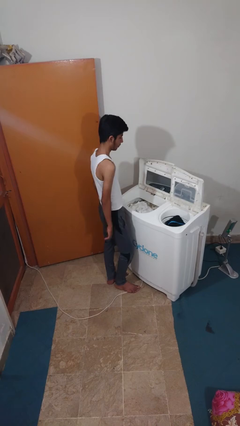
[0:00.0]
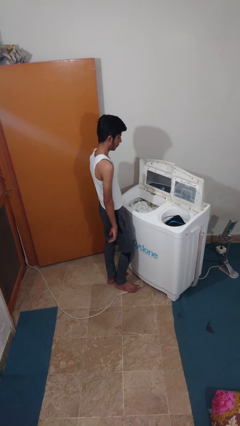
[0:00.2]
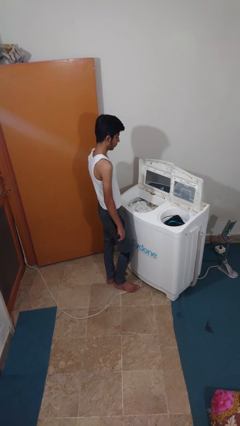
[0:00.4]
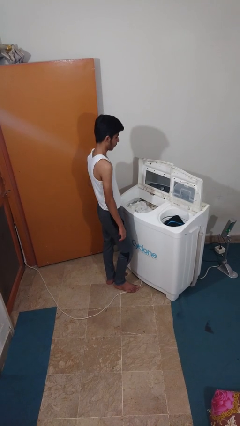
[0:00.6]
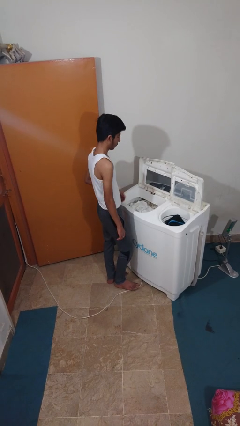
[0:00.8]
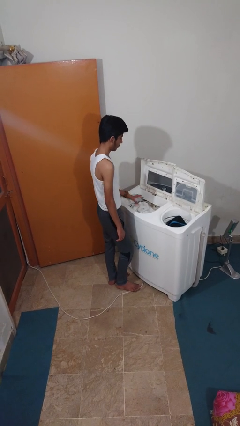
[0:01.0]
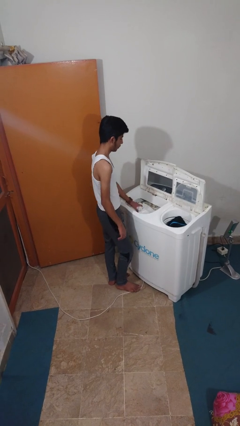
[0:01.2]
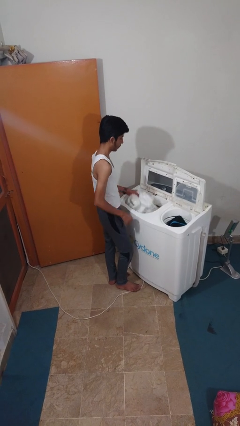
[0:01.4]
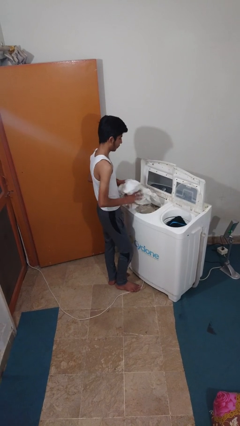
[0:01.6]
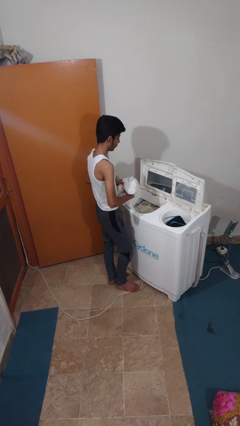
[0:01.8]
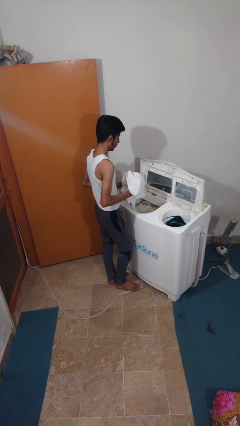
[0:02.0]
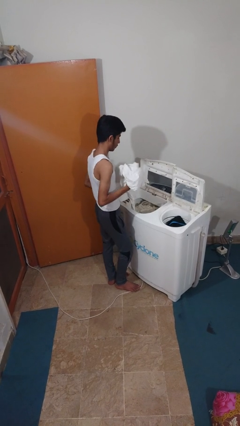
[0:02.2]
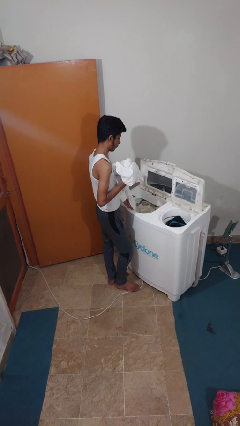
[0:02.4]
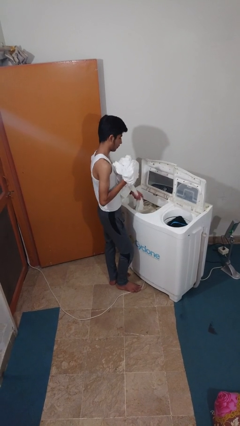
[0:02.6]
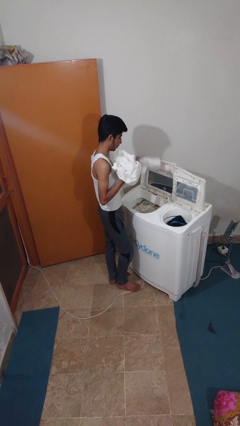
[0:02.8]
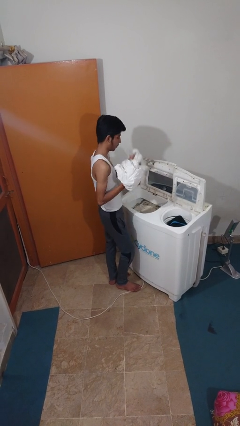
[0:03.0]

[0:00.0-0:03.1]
person unloads clotheswasher

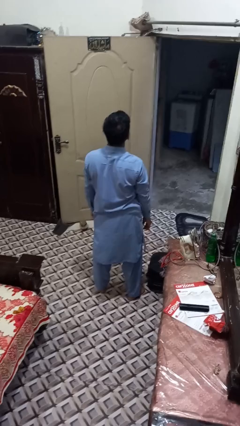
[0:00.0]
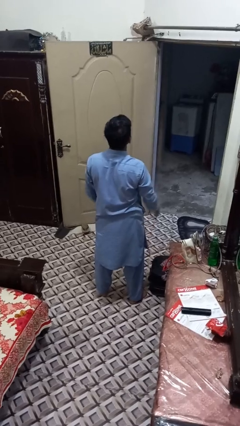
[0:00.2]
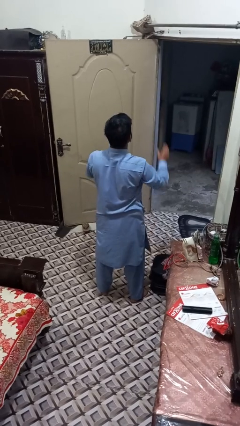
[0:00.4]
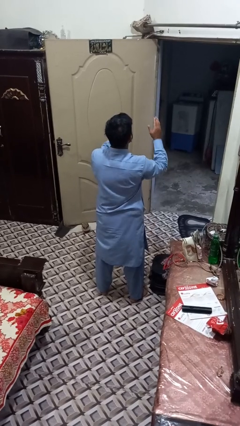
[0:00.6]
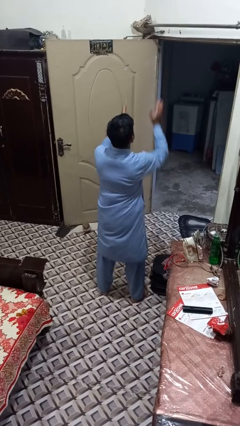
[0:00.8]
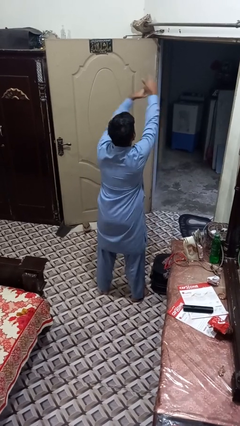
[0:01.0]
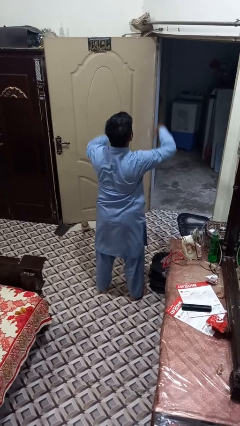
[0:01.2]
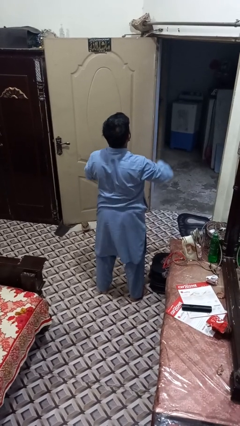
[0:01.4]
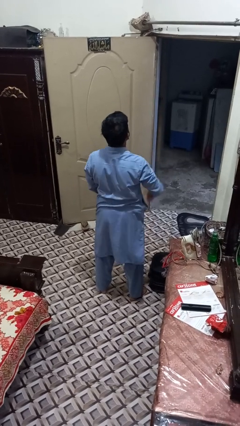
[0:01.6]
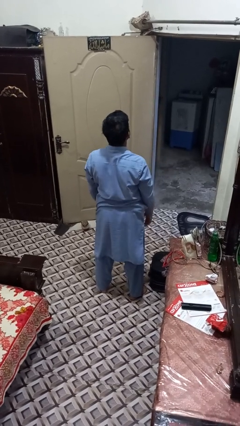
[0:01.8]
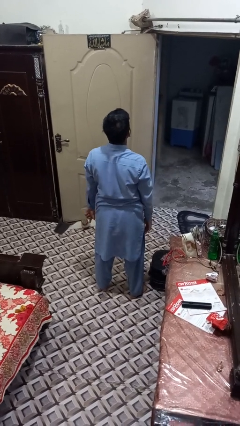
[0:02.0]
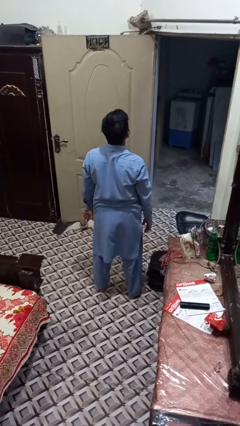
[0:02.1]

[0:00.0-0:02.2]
person swats bug

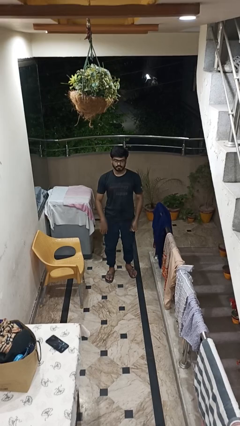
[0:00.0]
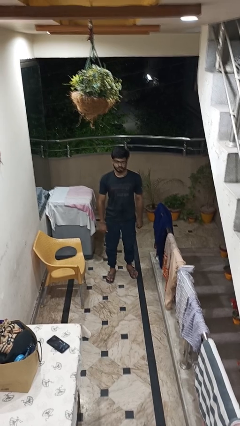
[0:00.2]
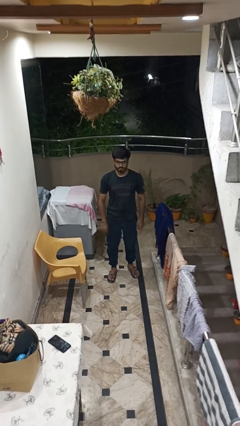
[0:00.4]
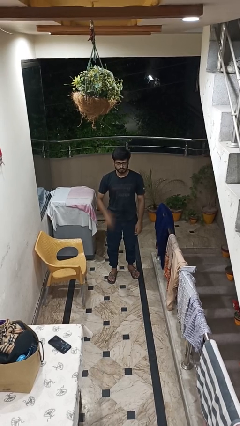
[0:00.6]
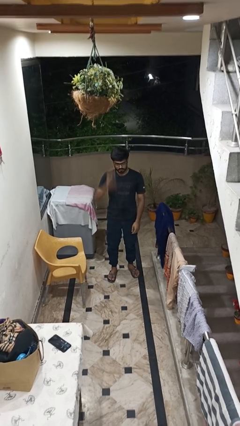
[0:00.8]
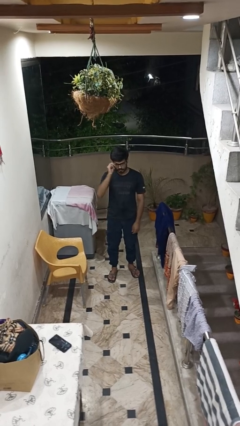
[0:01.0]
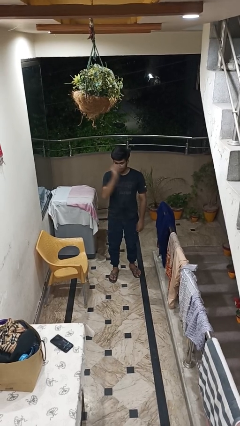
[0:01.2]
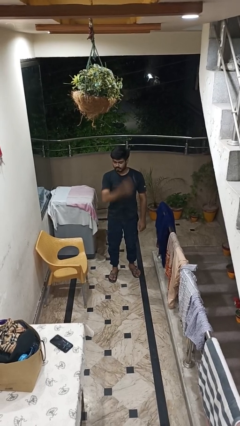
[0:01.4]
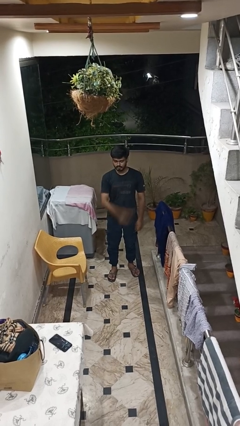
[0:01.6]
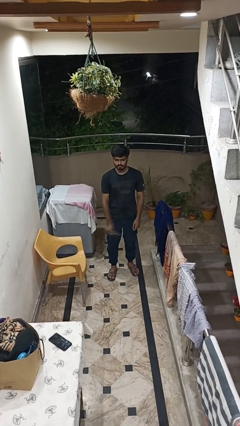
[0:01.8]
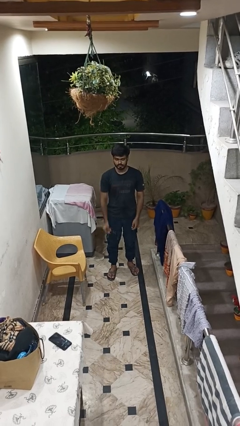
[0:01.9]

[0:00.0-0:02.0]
person takes off glasses

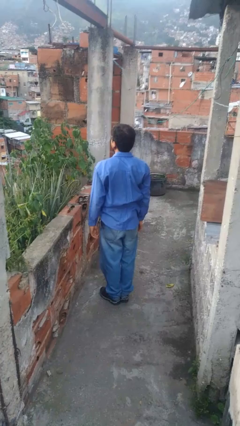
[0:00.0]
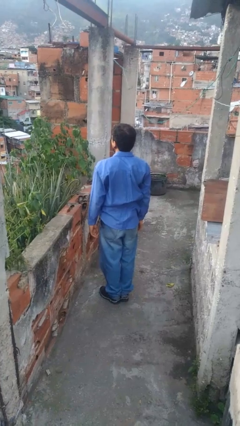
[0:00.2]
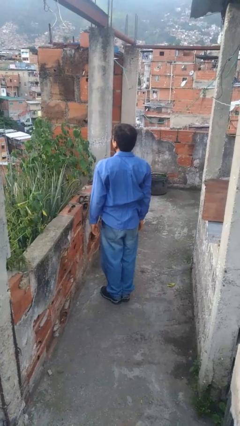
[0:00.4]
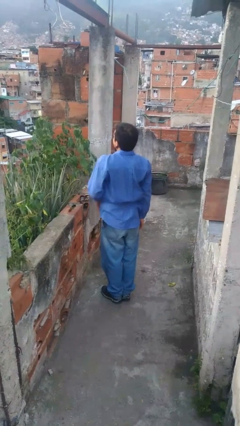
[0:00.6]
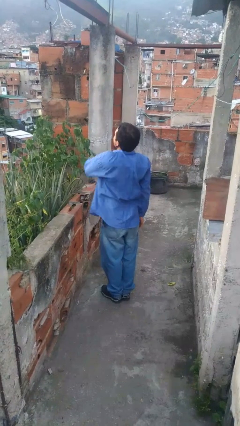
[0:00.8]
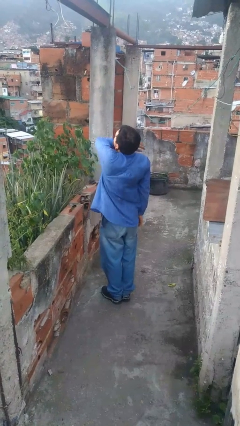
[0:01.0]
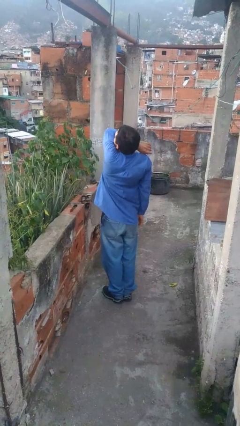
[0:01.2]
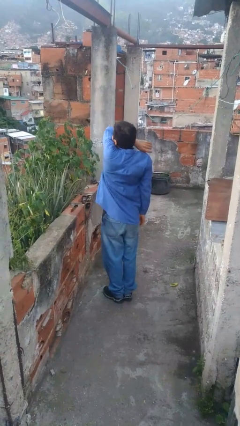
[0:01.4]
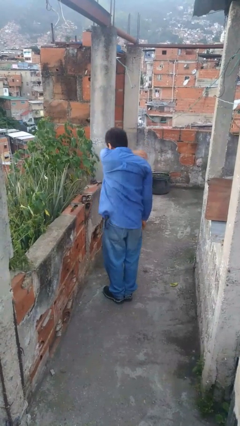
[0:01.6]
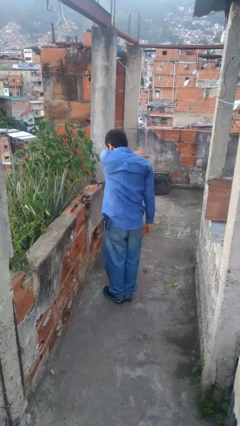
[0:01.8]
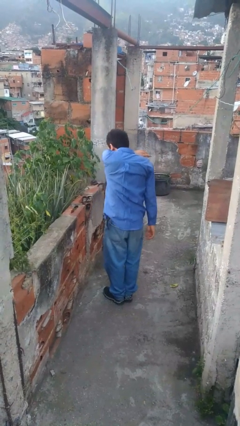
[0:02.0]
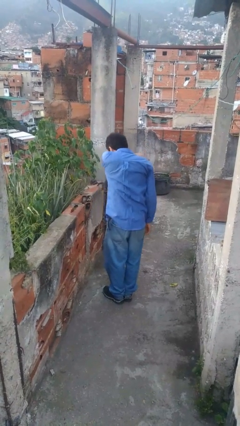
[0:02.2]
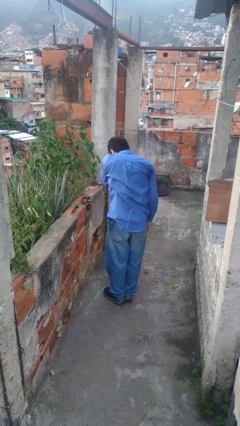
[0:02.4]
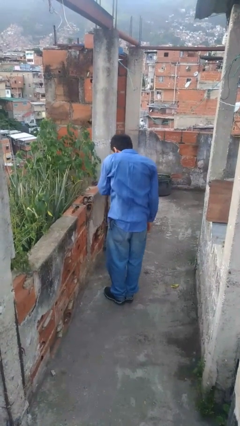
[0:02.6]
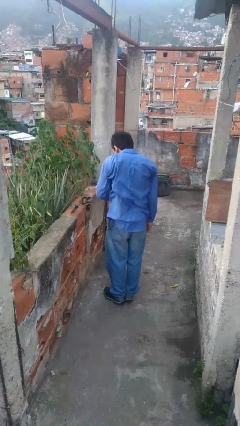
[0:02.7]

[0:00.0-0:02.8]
person sneezes into arm

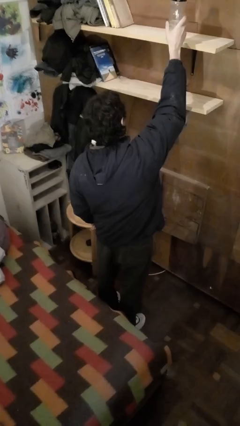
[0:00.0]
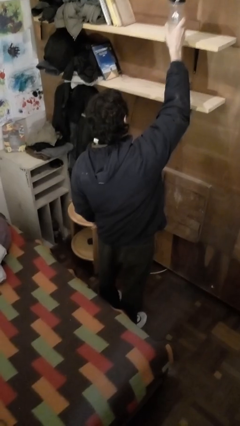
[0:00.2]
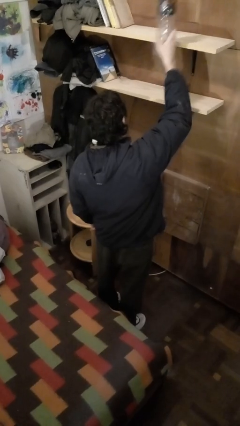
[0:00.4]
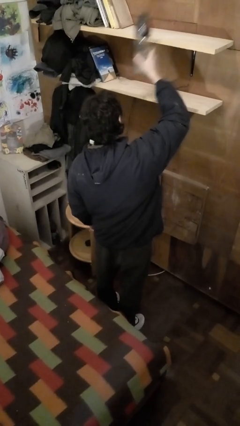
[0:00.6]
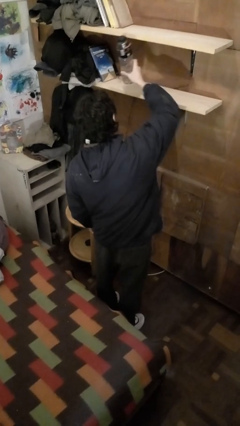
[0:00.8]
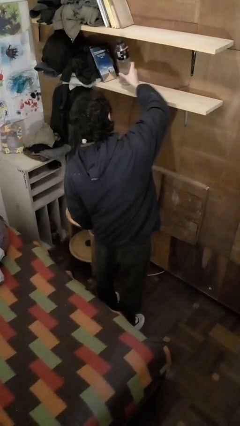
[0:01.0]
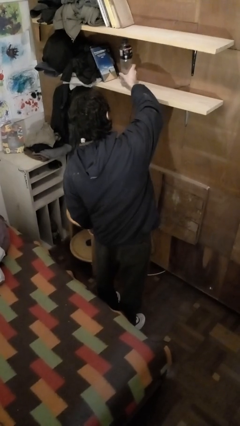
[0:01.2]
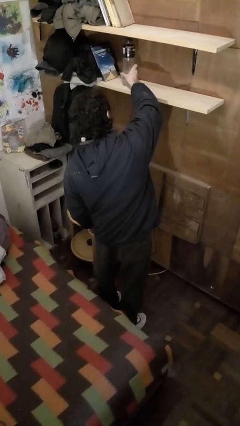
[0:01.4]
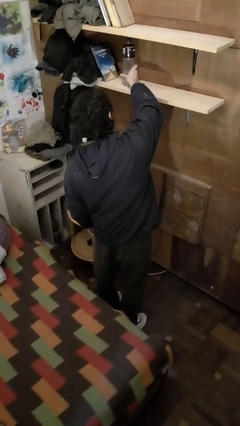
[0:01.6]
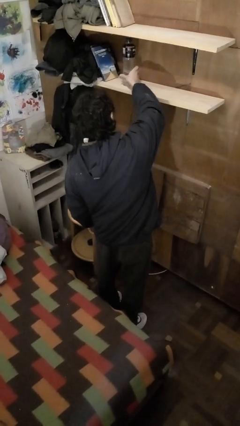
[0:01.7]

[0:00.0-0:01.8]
person puts down object on shelf

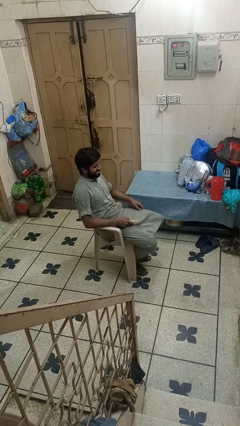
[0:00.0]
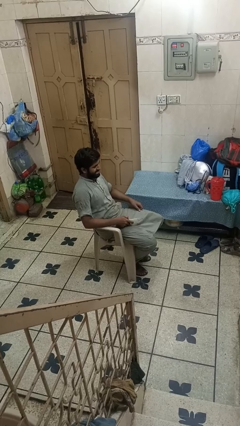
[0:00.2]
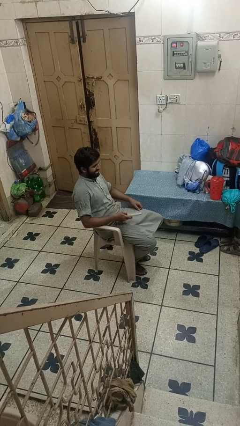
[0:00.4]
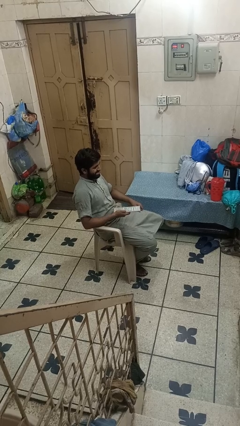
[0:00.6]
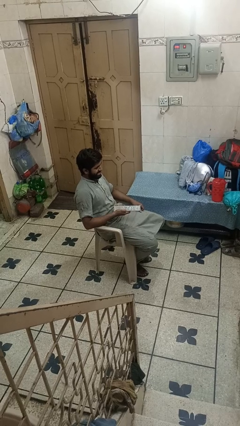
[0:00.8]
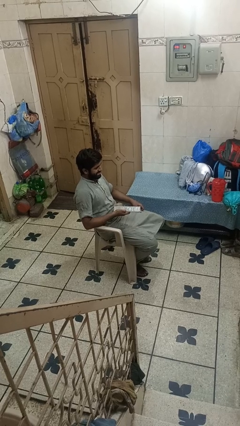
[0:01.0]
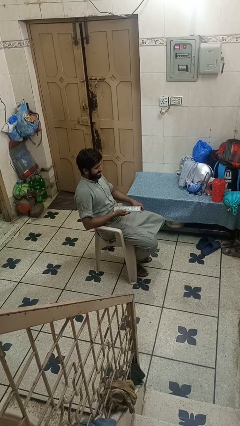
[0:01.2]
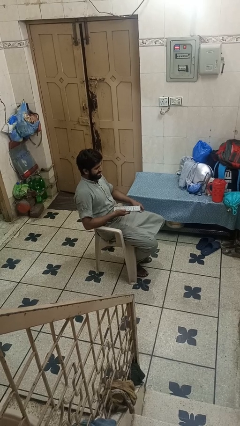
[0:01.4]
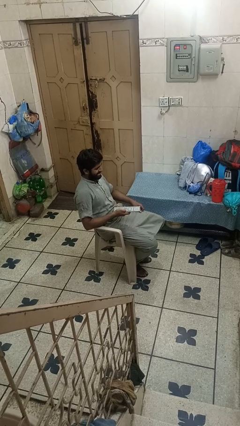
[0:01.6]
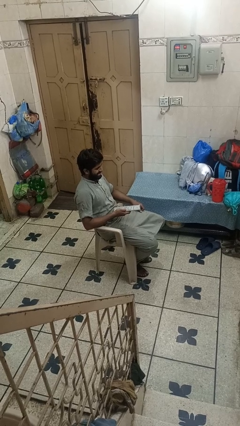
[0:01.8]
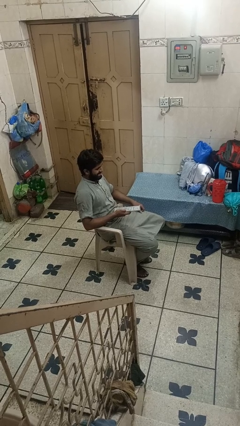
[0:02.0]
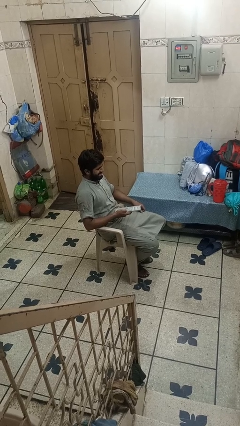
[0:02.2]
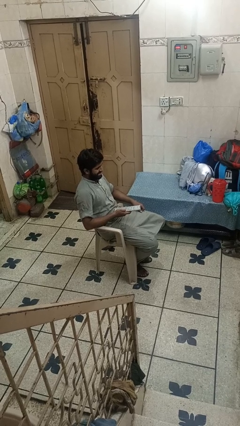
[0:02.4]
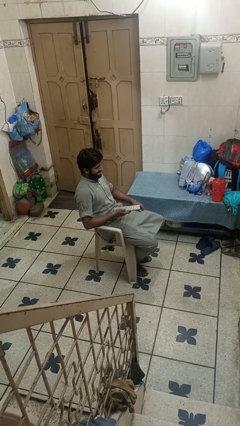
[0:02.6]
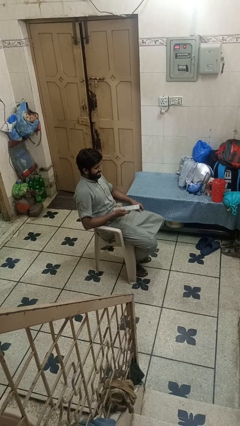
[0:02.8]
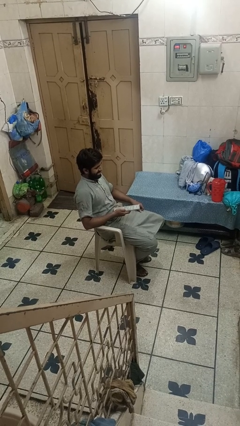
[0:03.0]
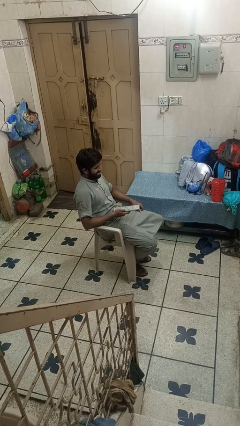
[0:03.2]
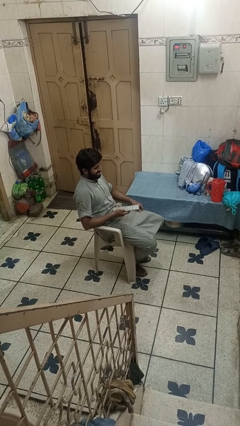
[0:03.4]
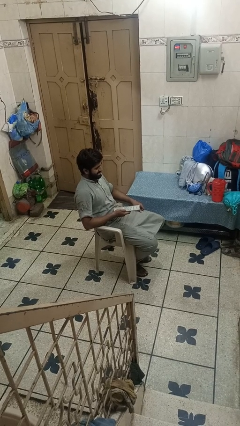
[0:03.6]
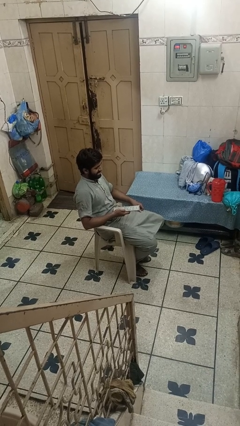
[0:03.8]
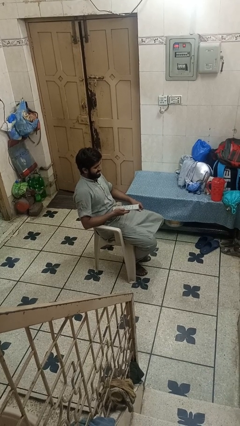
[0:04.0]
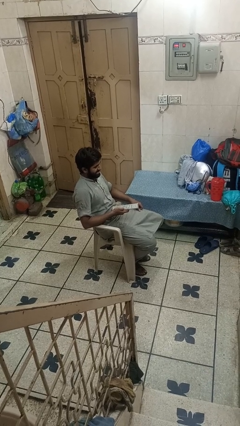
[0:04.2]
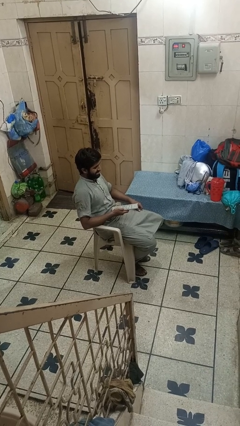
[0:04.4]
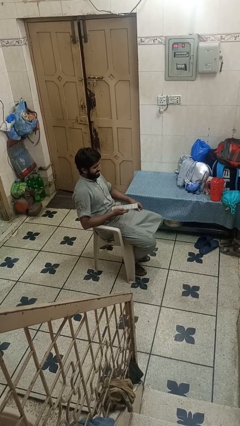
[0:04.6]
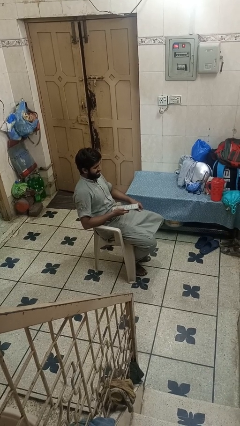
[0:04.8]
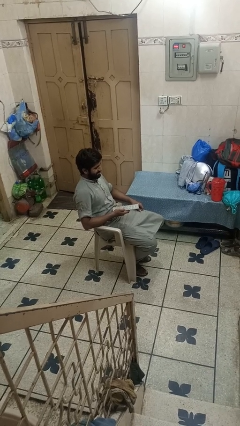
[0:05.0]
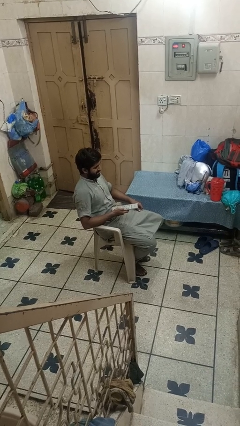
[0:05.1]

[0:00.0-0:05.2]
person uses television remote

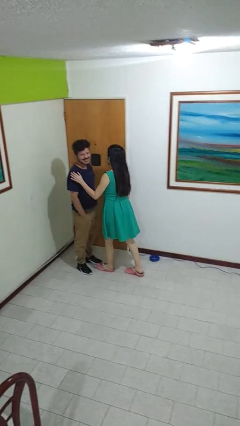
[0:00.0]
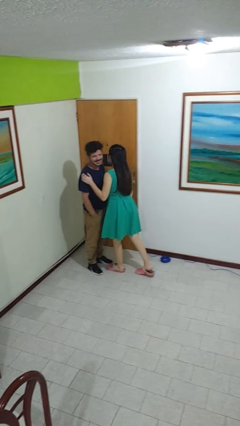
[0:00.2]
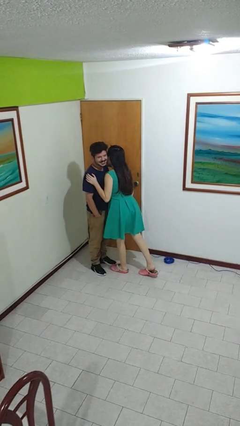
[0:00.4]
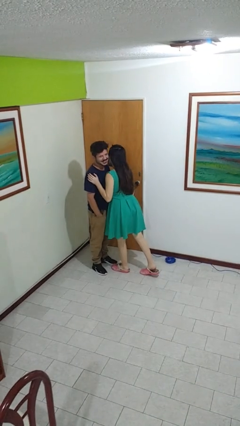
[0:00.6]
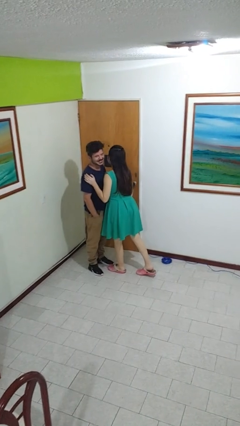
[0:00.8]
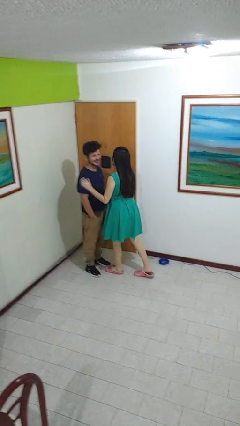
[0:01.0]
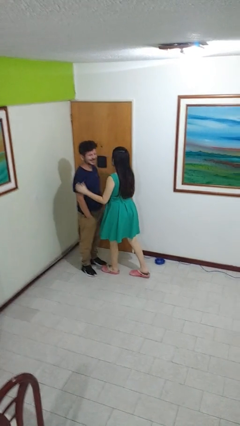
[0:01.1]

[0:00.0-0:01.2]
person kisses cheek of person
